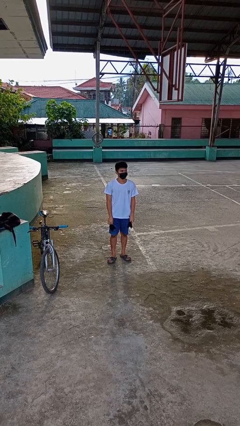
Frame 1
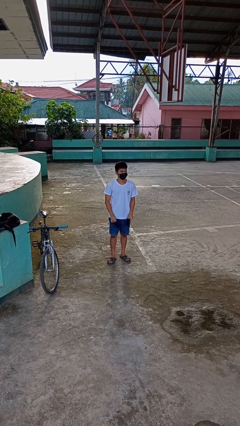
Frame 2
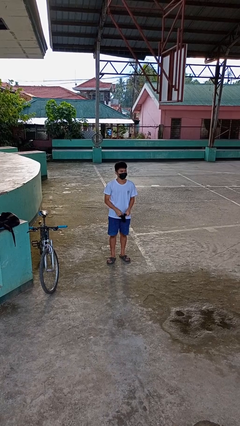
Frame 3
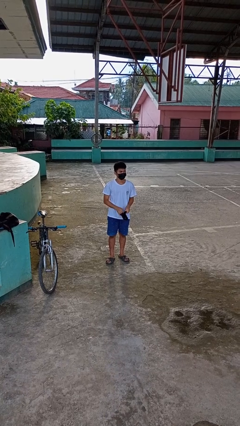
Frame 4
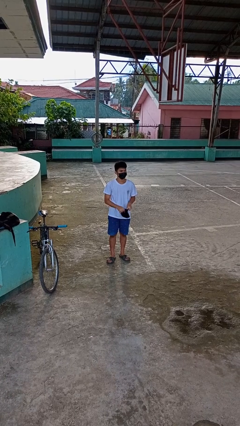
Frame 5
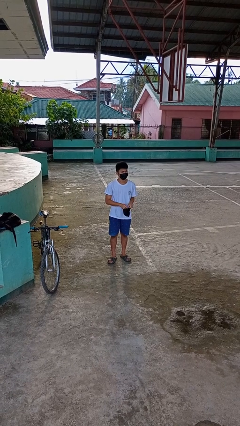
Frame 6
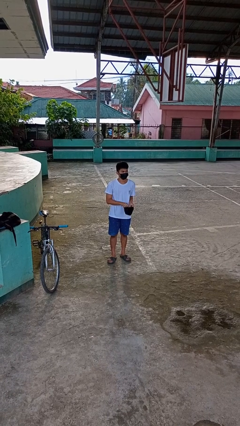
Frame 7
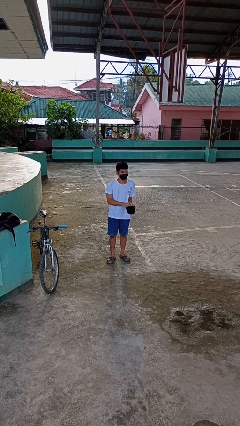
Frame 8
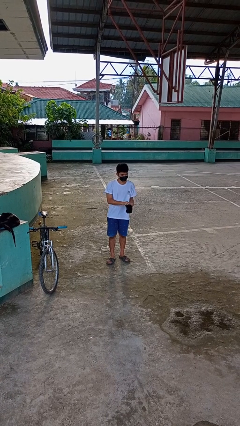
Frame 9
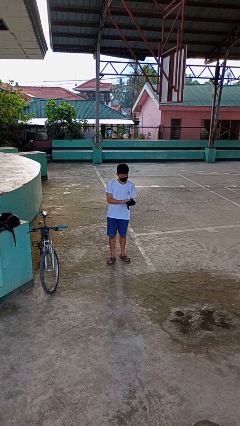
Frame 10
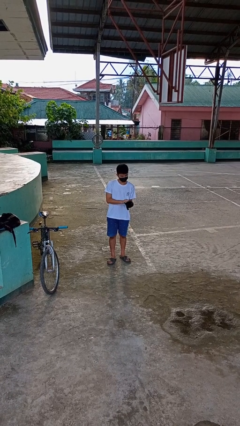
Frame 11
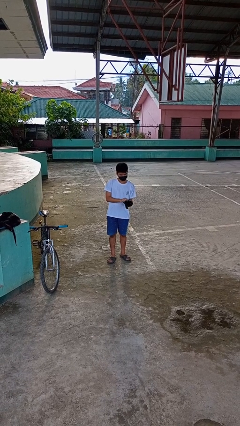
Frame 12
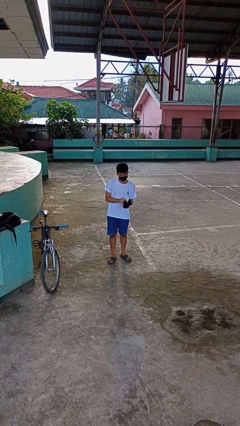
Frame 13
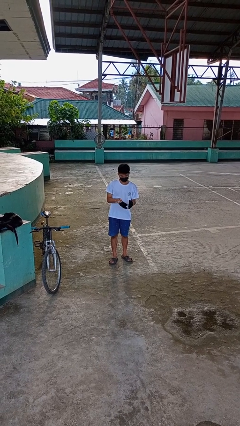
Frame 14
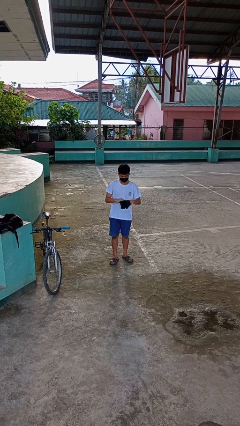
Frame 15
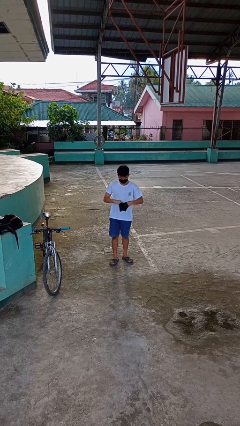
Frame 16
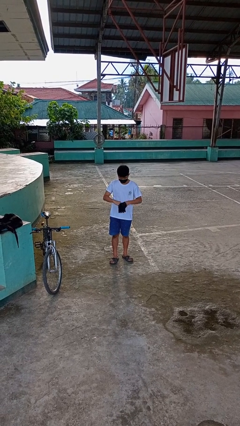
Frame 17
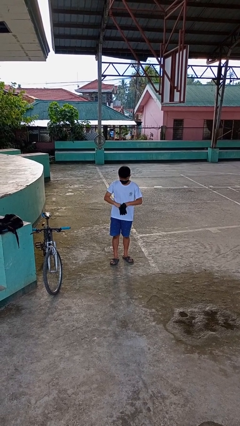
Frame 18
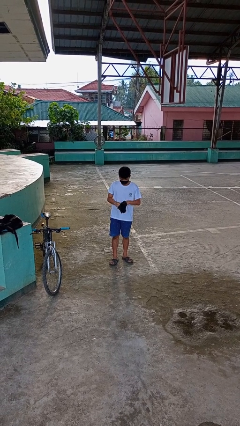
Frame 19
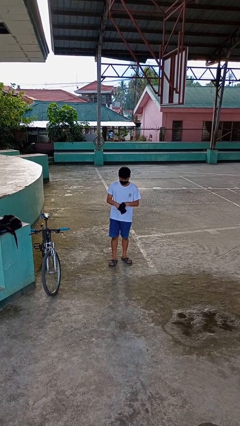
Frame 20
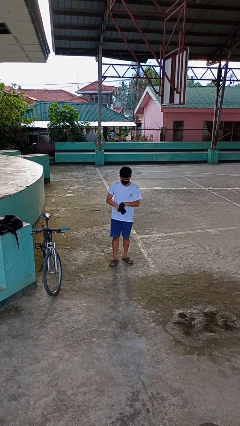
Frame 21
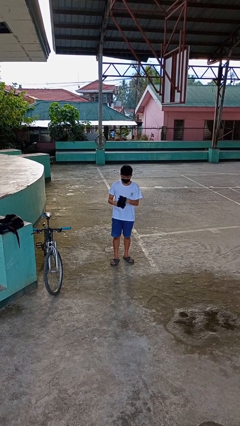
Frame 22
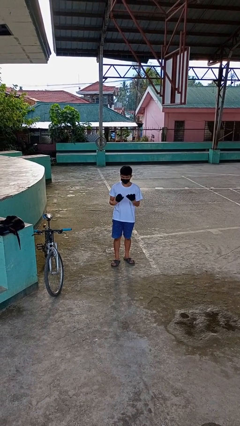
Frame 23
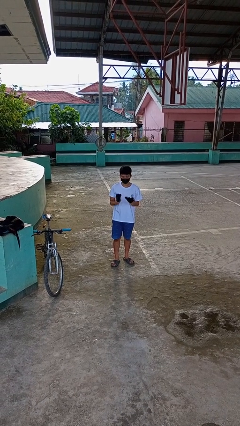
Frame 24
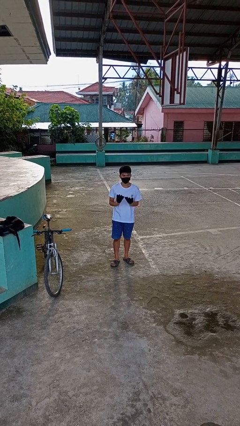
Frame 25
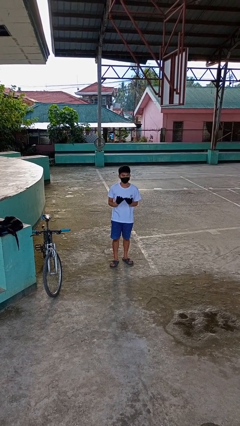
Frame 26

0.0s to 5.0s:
person puts on gloves

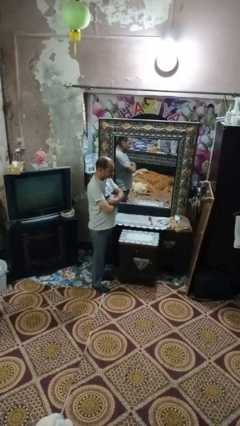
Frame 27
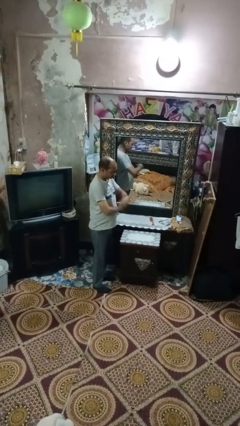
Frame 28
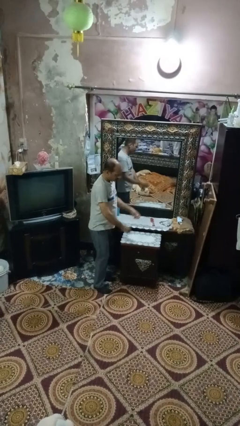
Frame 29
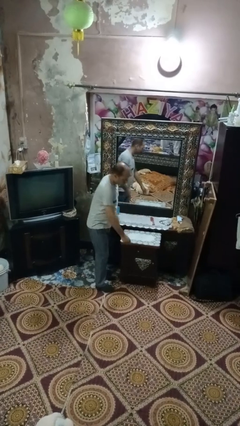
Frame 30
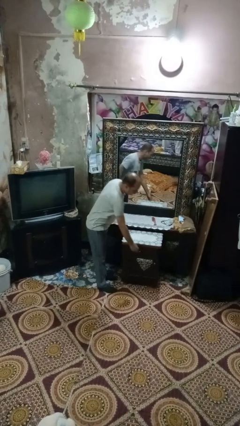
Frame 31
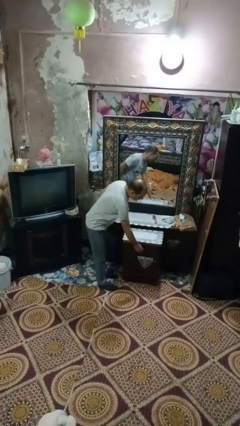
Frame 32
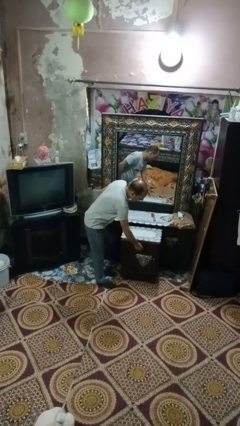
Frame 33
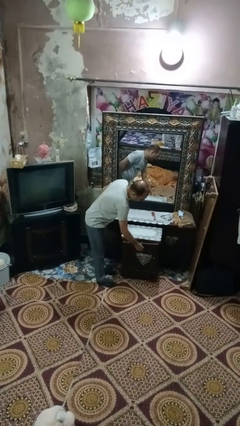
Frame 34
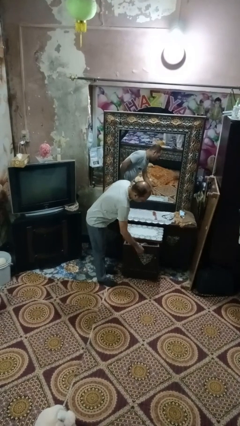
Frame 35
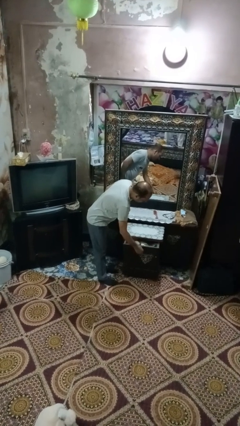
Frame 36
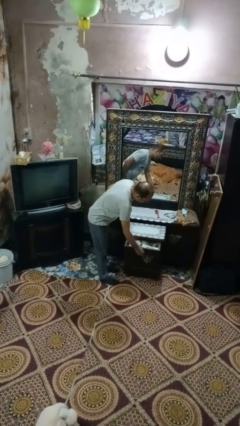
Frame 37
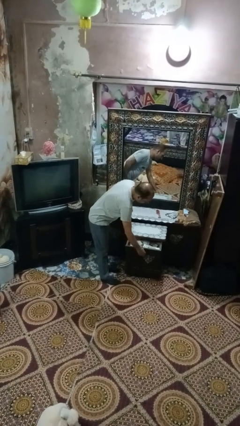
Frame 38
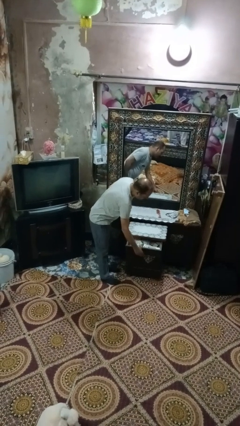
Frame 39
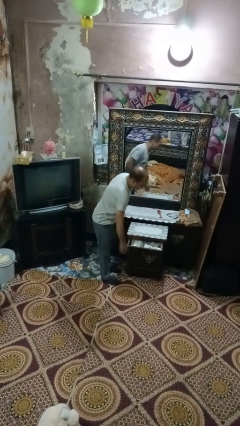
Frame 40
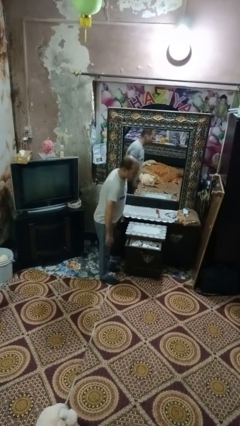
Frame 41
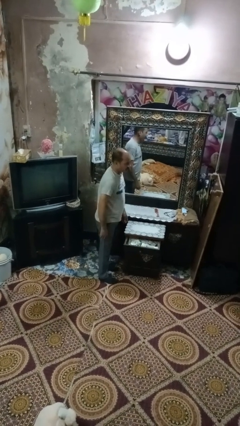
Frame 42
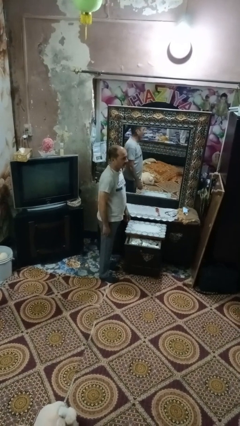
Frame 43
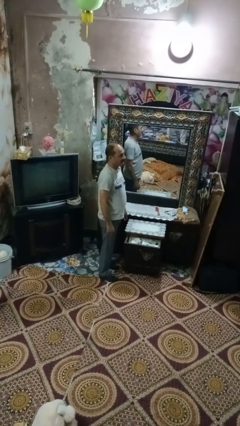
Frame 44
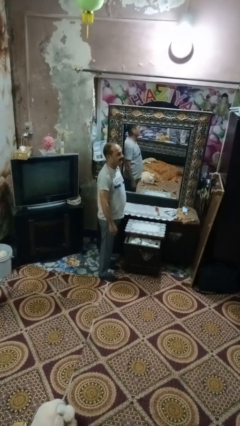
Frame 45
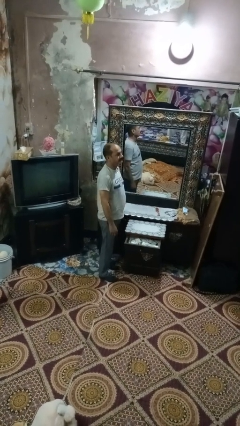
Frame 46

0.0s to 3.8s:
person opens dresser drawer

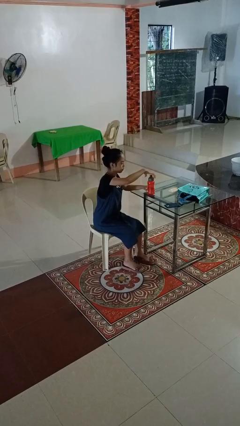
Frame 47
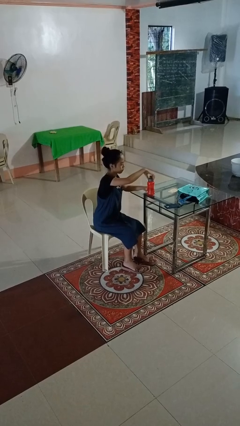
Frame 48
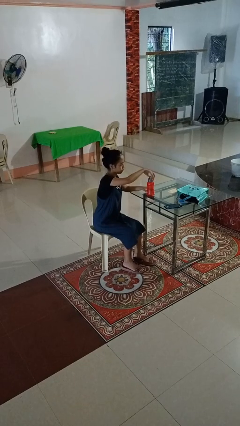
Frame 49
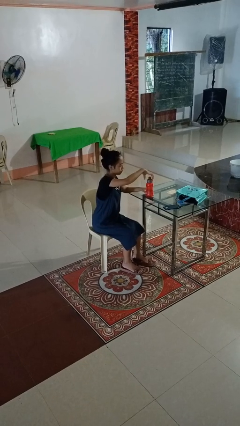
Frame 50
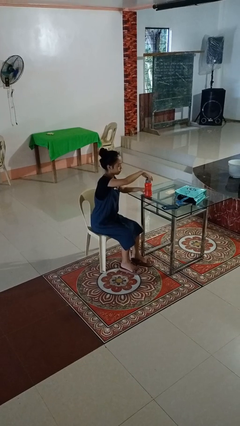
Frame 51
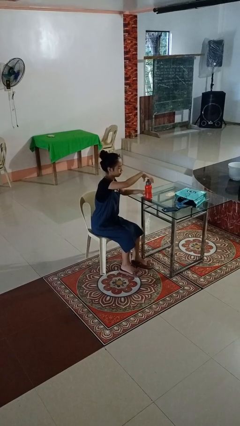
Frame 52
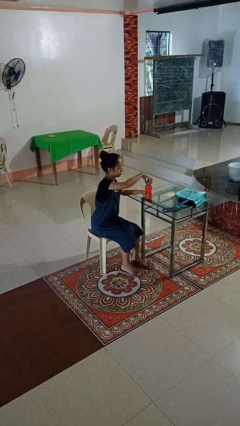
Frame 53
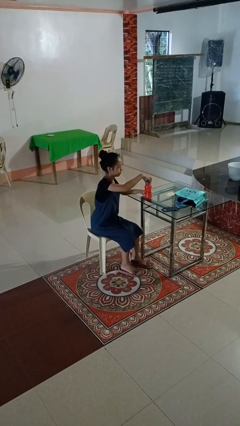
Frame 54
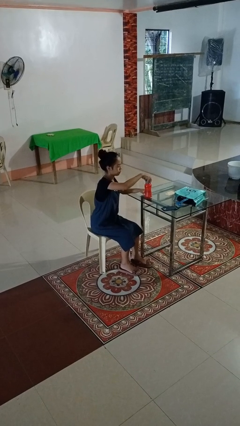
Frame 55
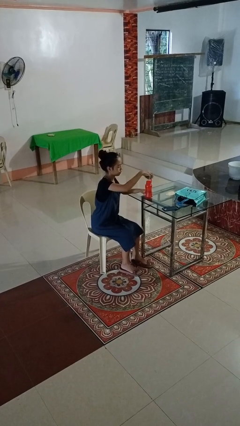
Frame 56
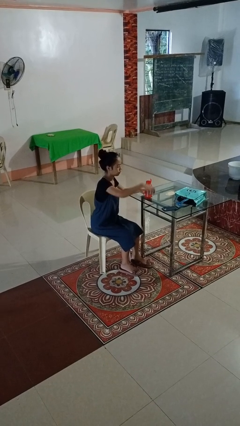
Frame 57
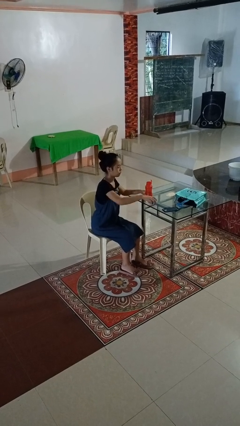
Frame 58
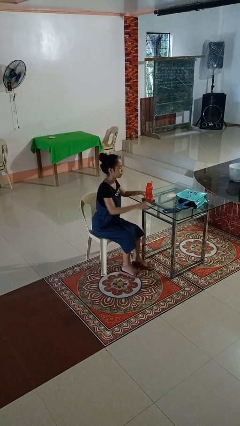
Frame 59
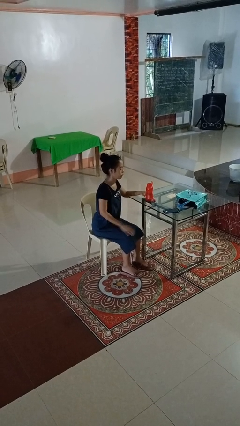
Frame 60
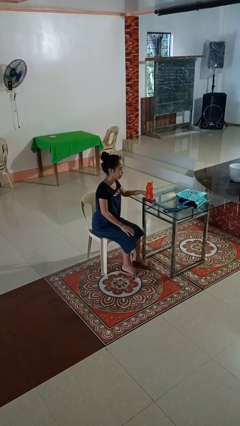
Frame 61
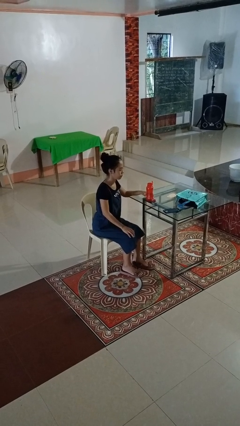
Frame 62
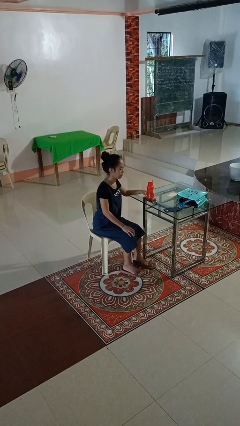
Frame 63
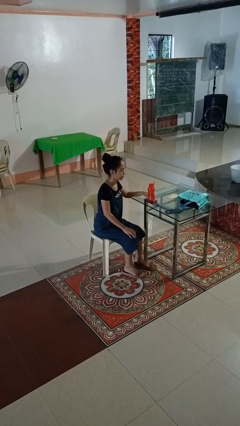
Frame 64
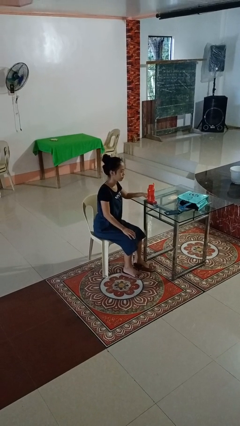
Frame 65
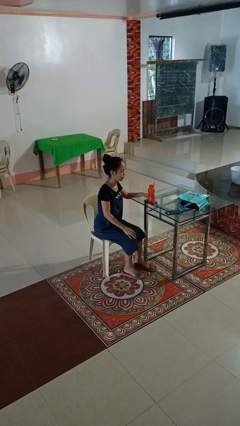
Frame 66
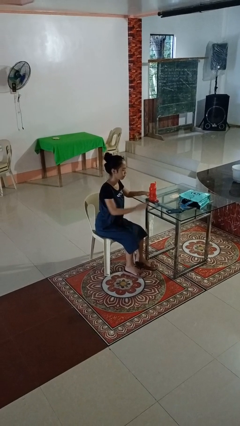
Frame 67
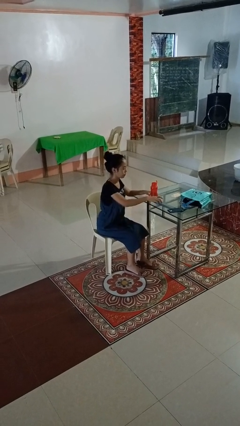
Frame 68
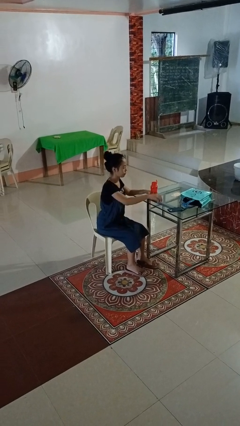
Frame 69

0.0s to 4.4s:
person unscrews lid from bottle

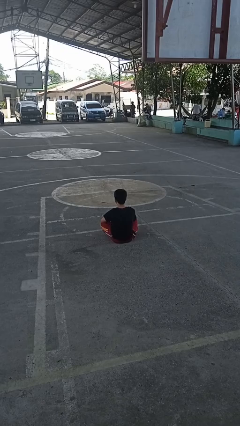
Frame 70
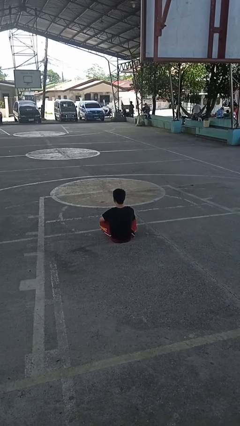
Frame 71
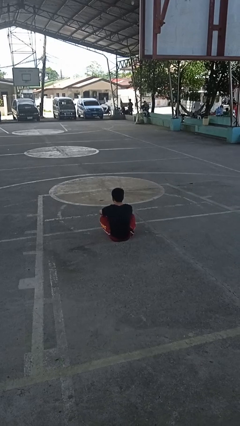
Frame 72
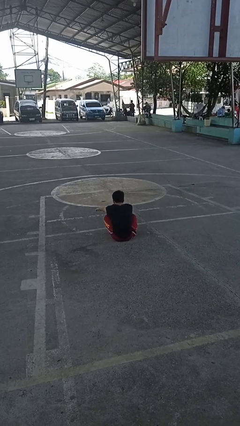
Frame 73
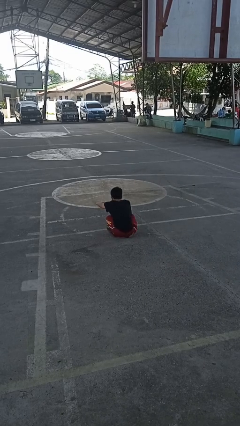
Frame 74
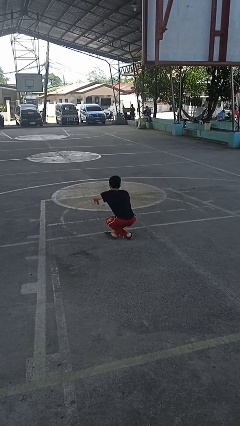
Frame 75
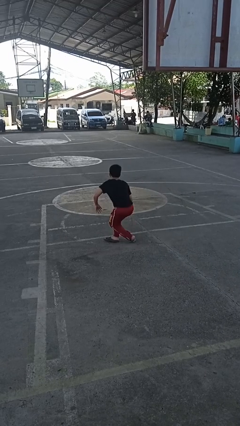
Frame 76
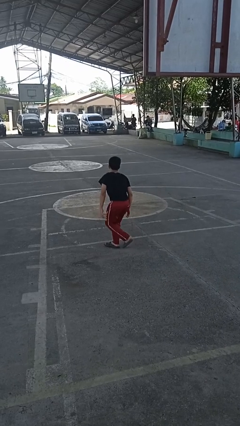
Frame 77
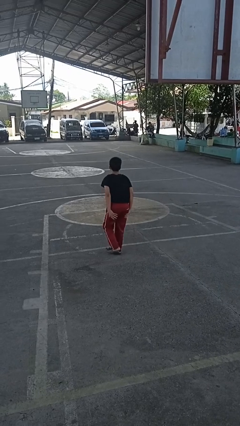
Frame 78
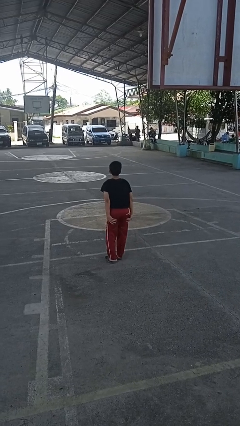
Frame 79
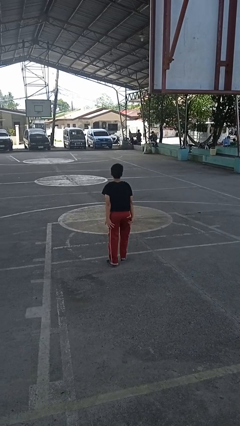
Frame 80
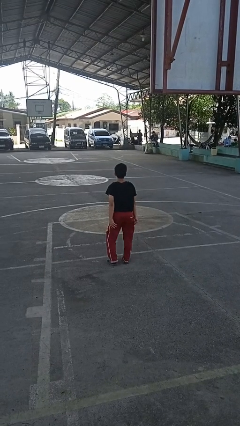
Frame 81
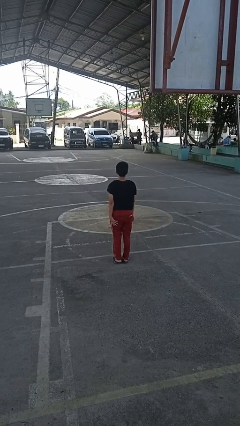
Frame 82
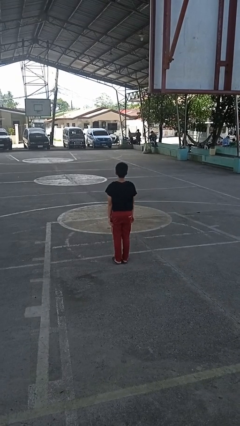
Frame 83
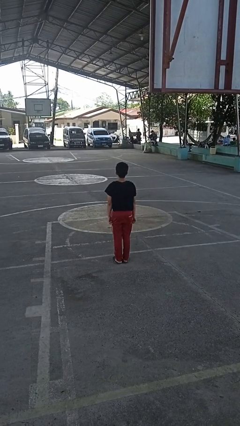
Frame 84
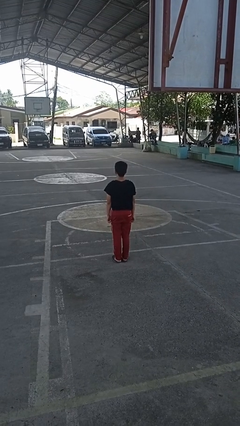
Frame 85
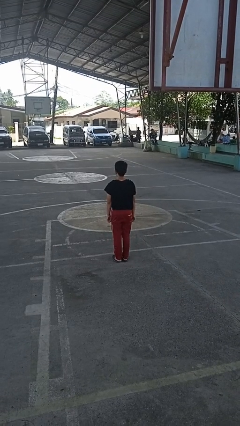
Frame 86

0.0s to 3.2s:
person stands up from floor

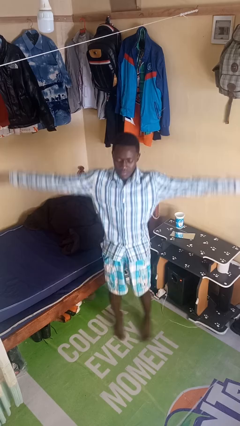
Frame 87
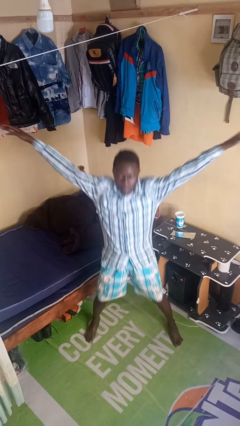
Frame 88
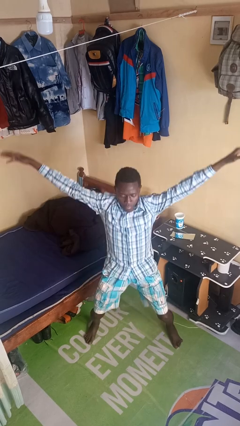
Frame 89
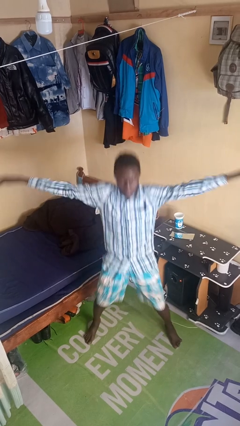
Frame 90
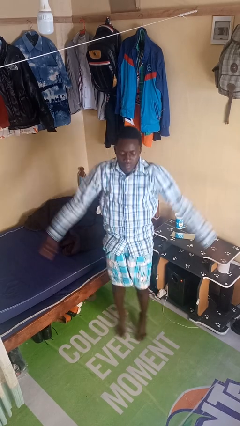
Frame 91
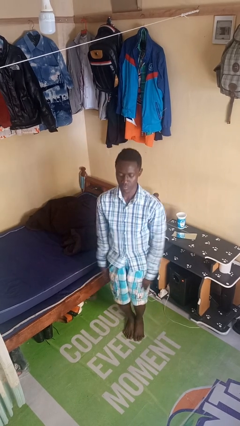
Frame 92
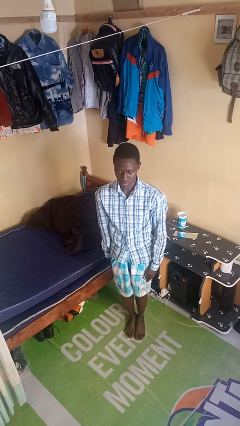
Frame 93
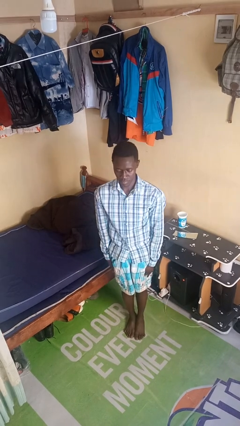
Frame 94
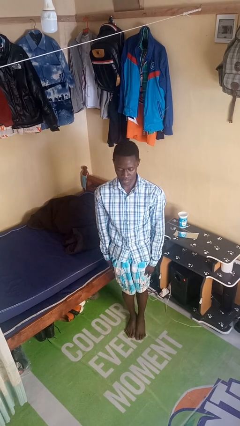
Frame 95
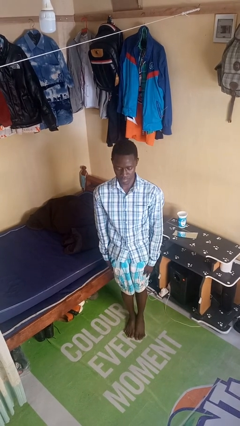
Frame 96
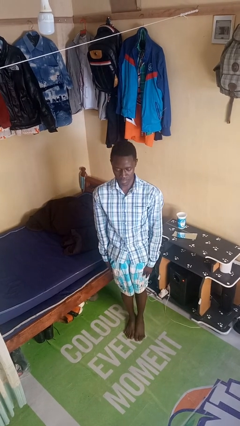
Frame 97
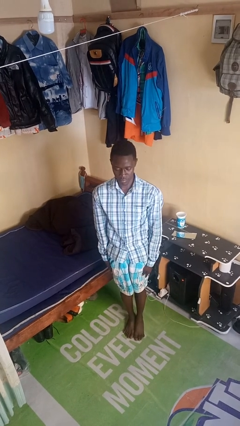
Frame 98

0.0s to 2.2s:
person exercises with jumping jacks
